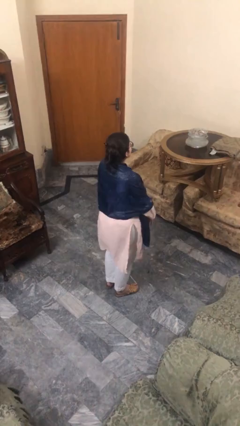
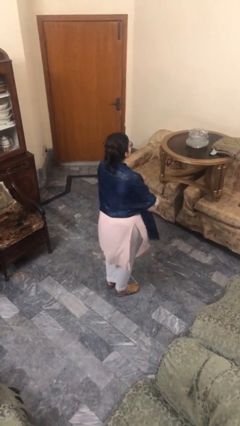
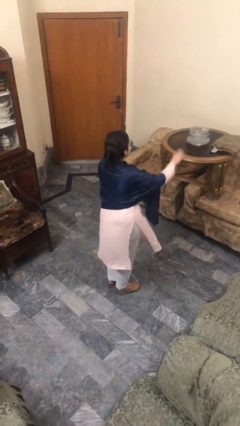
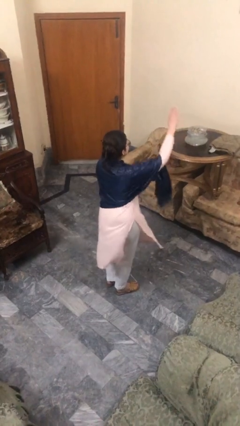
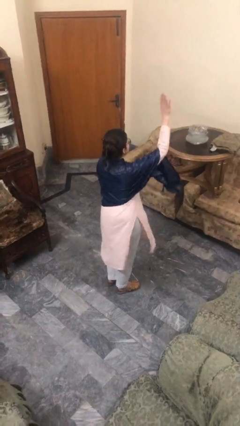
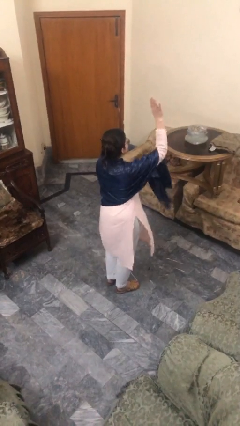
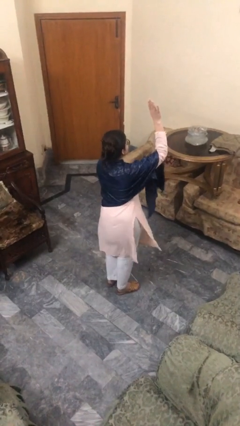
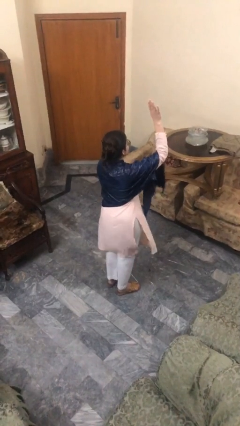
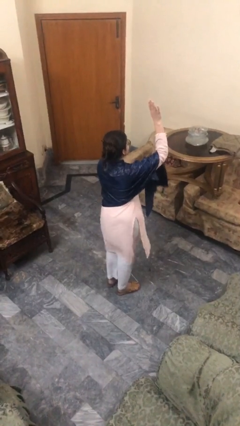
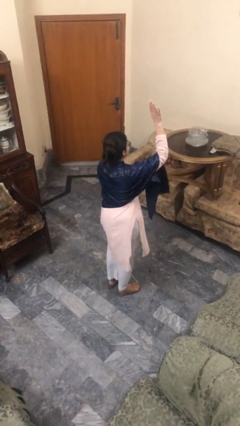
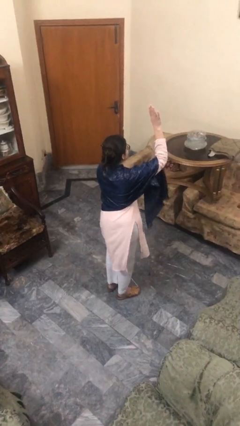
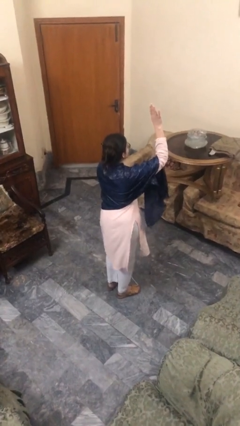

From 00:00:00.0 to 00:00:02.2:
person gestures raise hand

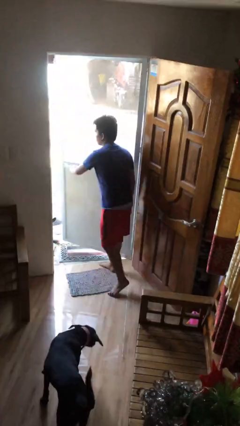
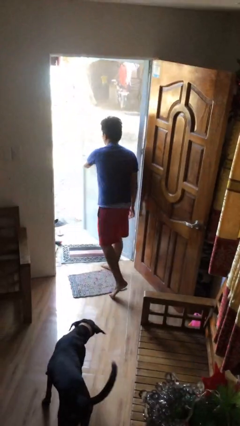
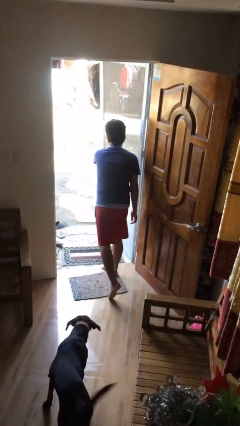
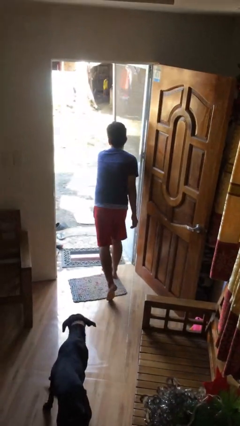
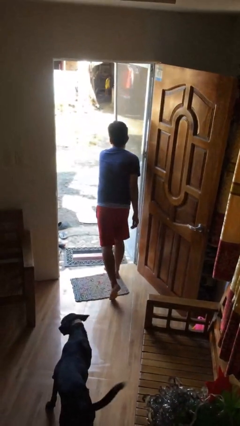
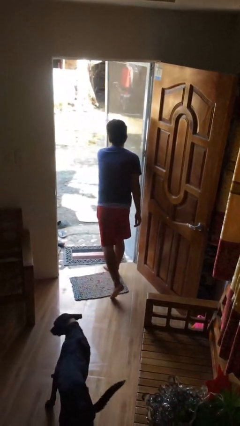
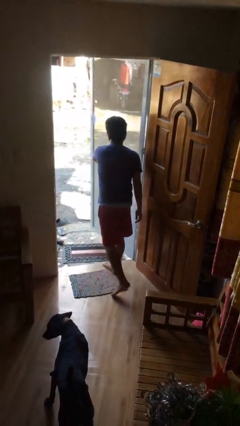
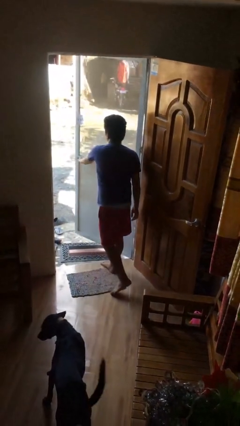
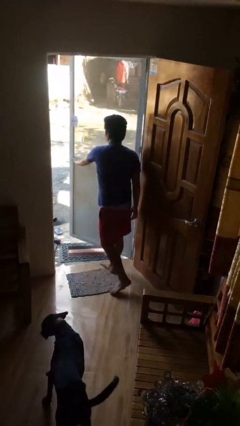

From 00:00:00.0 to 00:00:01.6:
person opens facility door

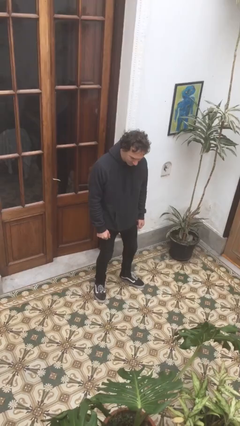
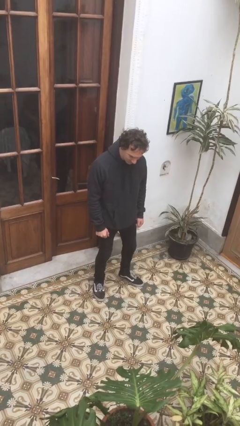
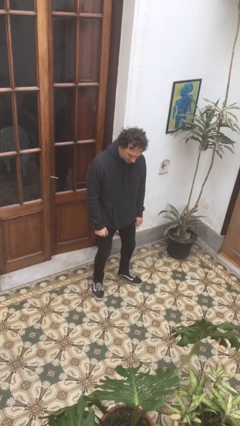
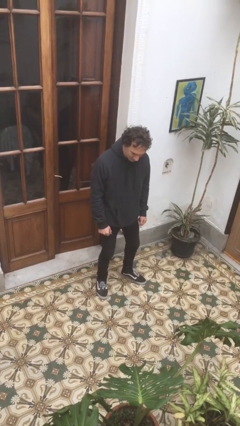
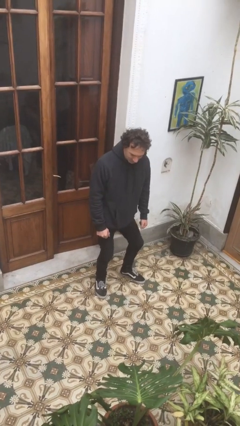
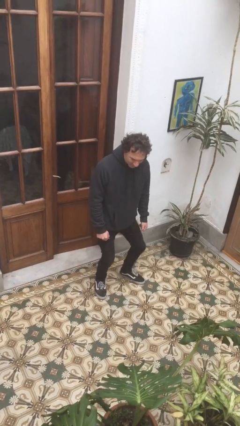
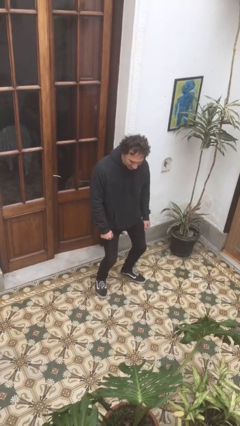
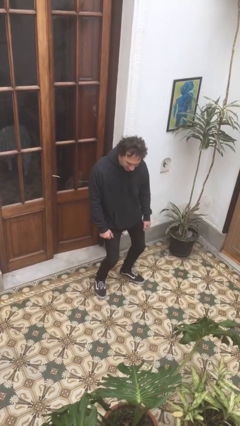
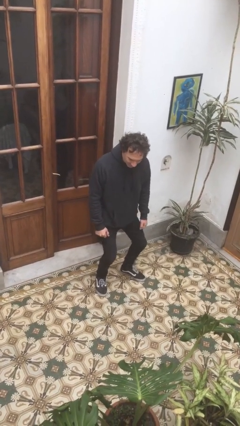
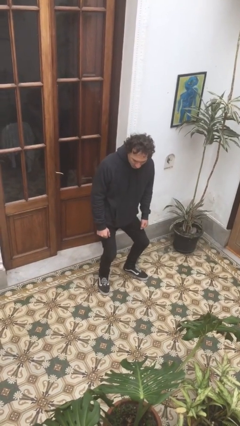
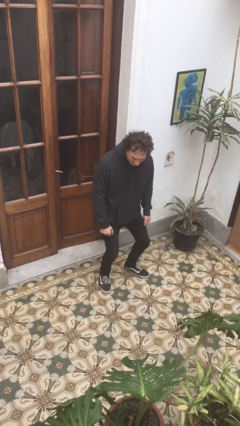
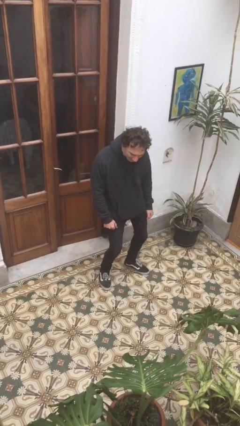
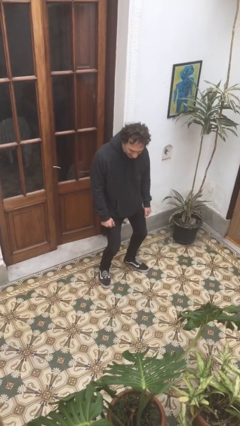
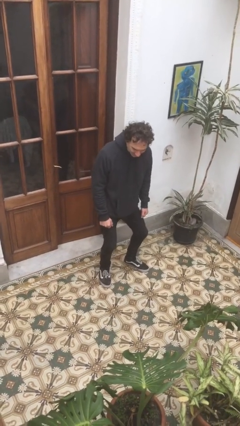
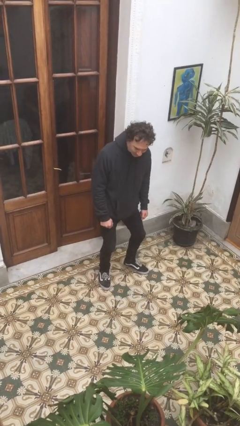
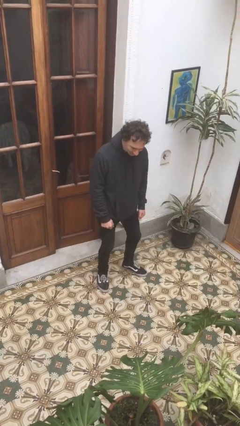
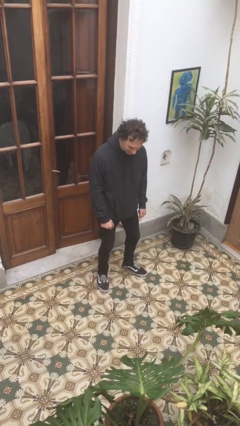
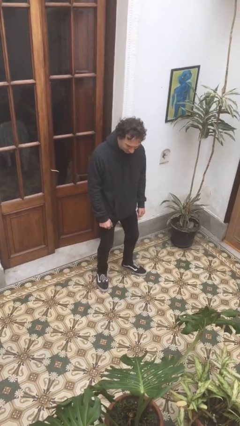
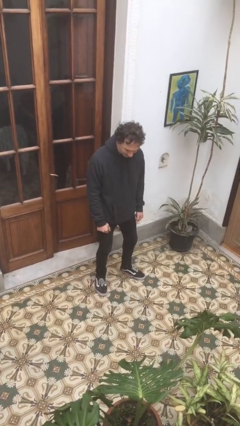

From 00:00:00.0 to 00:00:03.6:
person wiggles hips

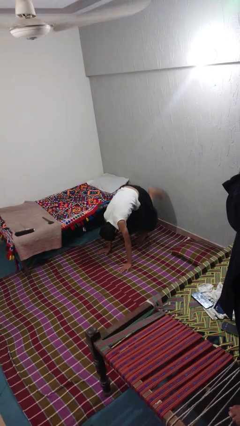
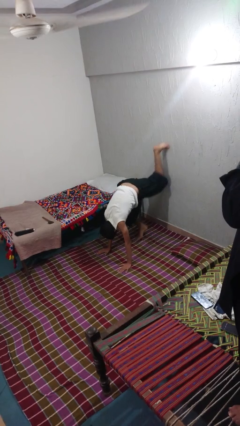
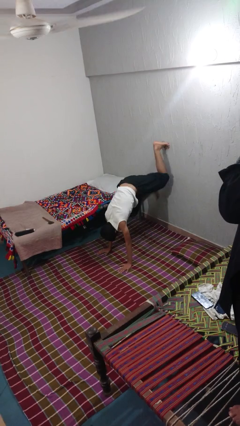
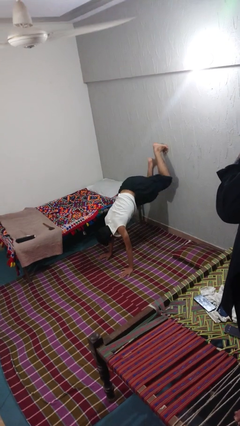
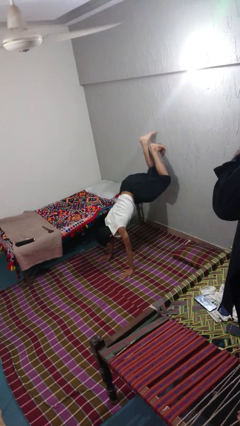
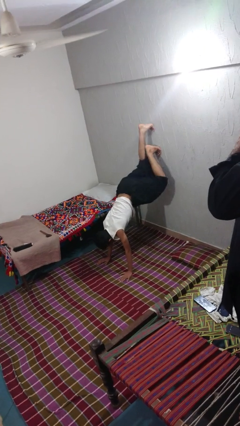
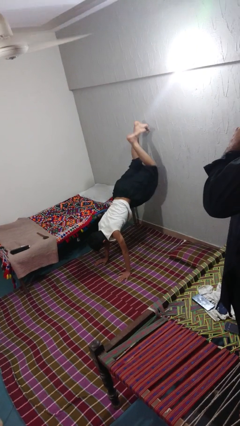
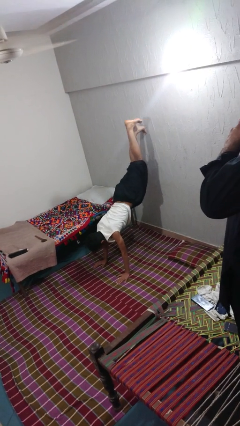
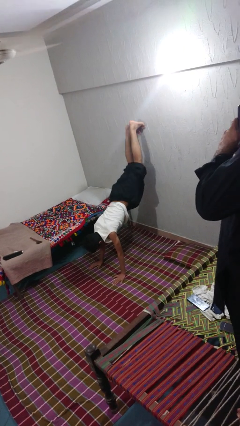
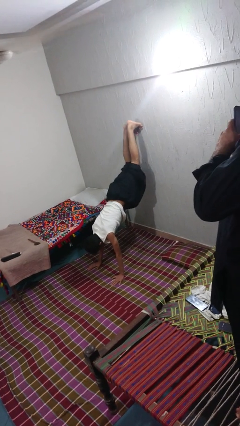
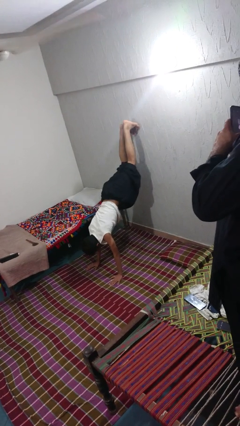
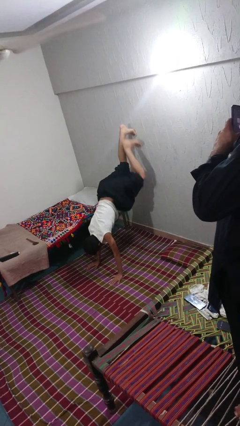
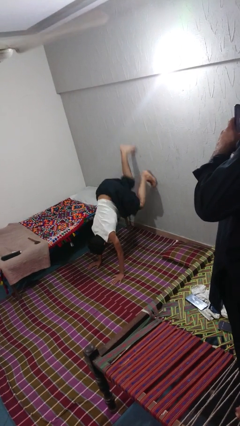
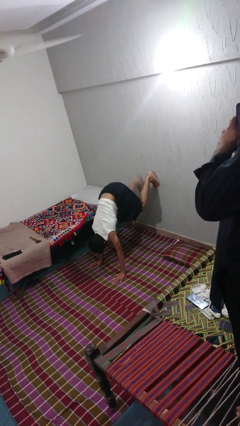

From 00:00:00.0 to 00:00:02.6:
person handstand

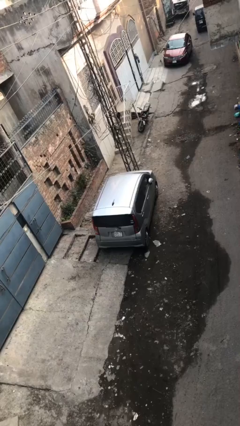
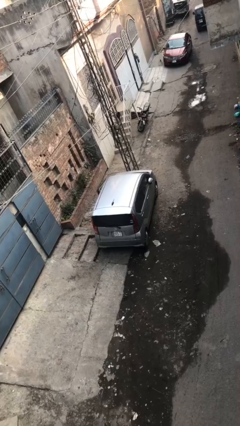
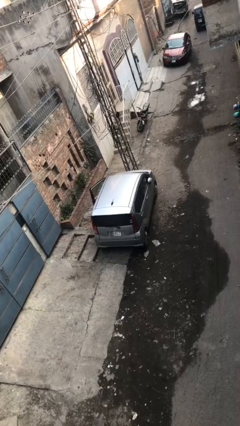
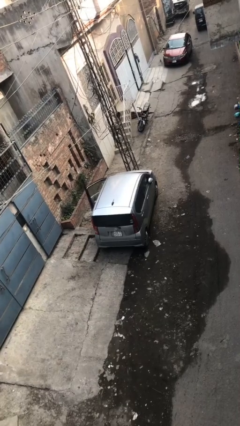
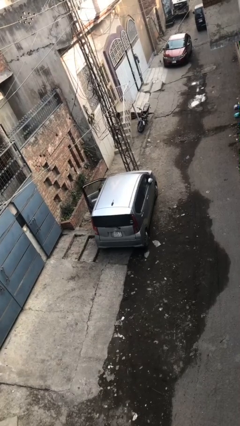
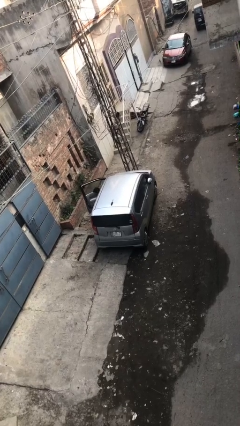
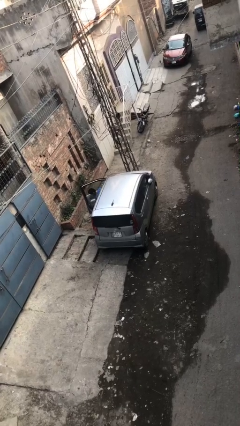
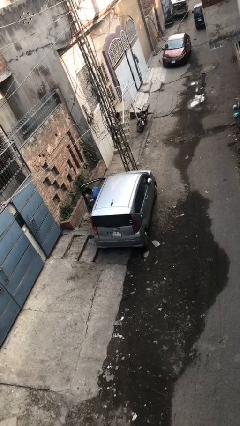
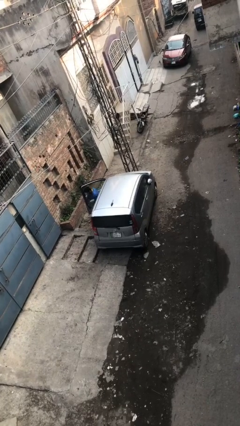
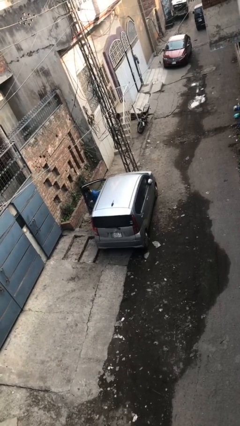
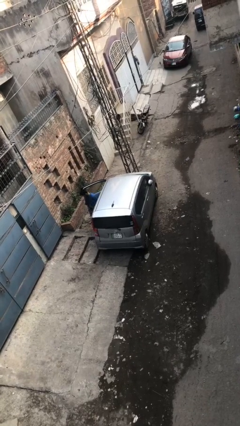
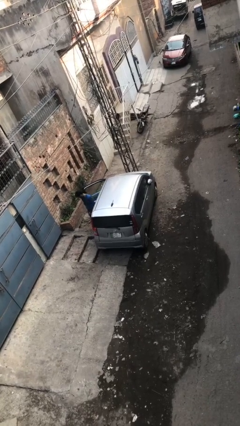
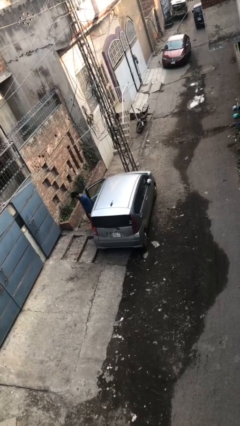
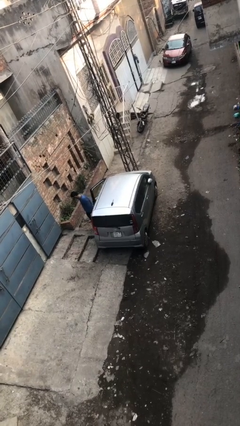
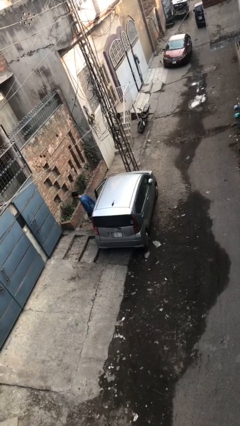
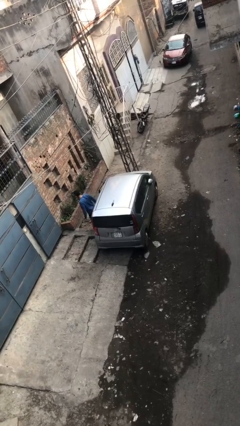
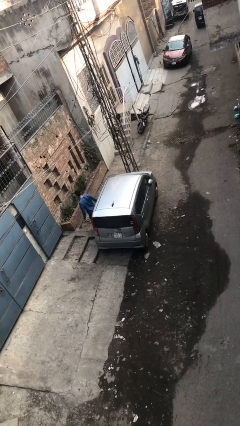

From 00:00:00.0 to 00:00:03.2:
car drops off person

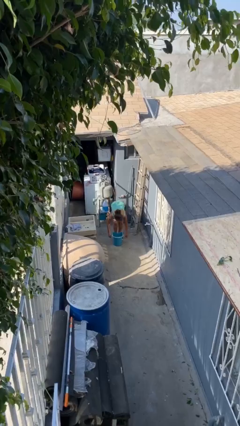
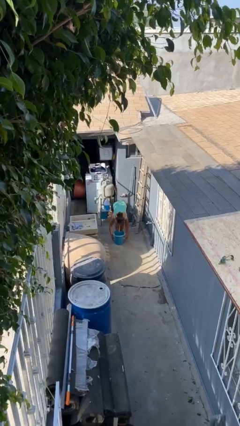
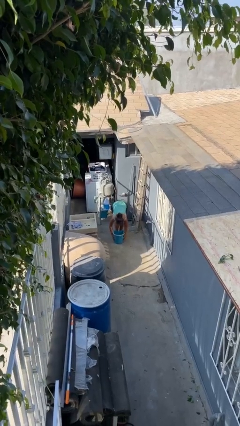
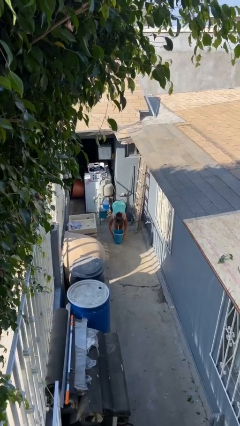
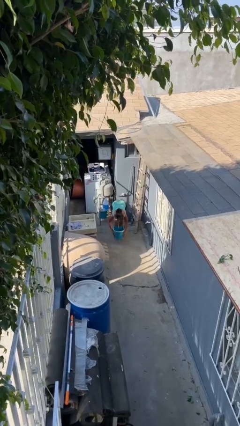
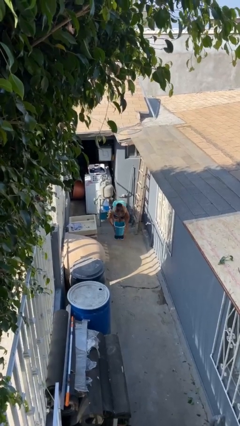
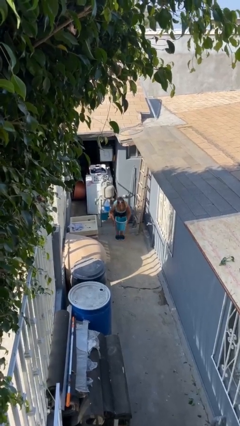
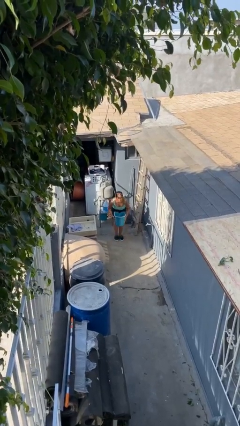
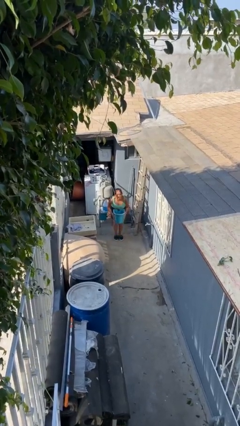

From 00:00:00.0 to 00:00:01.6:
person picks up object from floor

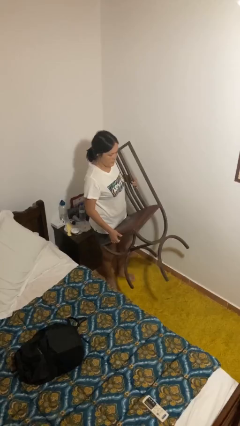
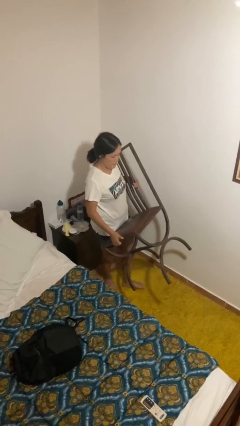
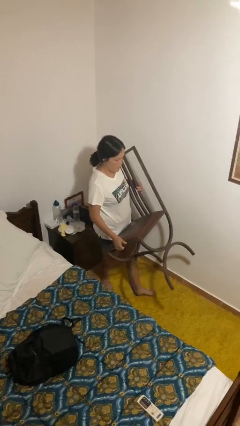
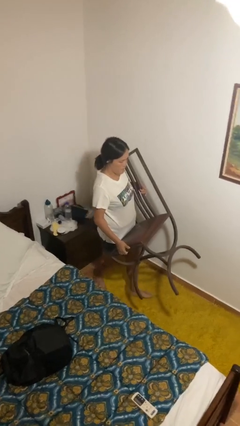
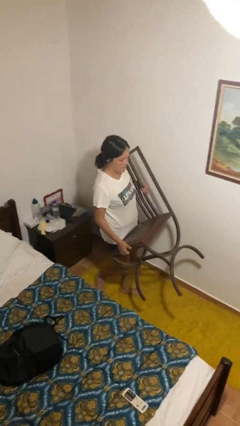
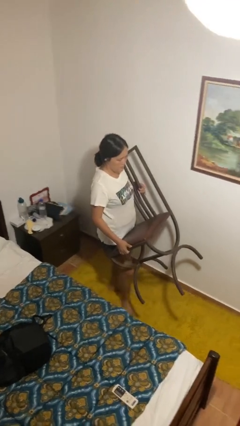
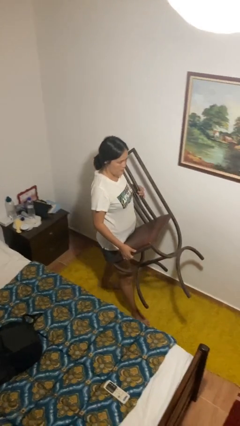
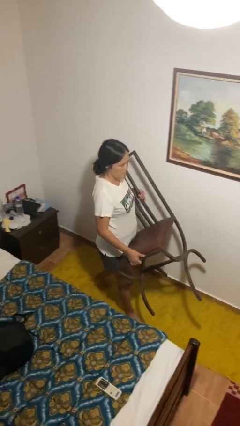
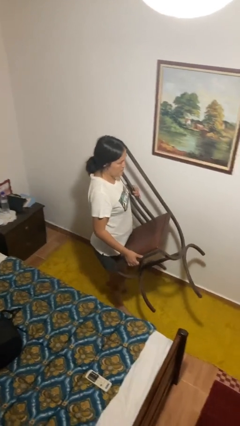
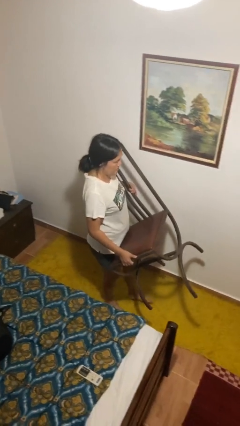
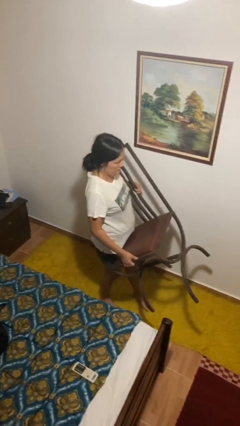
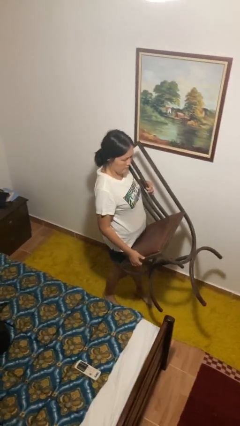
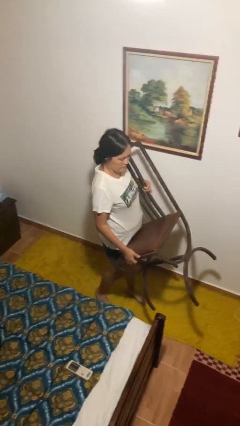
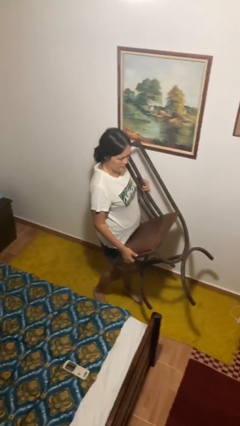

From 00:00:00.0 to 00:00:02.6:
person carries furniture
